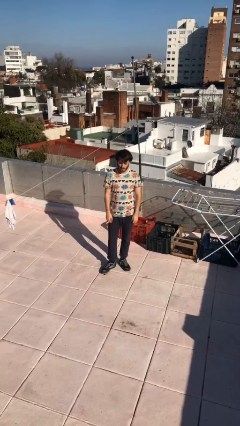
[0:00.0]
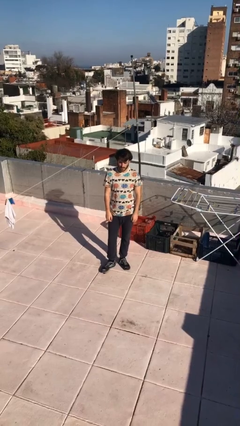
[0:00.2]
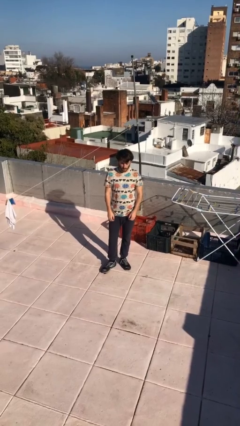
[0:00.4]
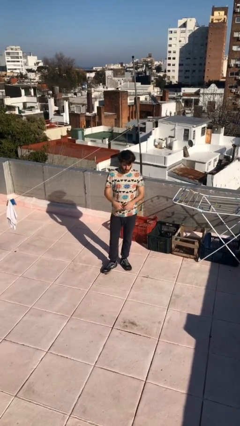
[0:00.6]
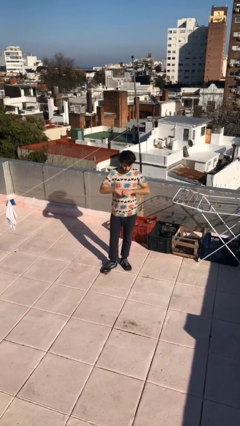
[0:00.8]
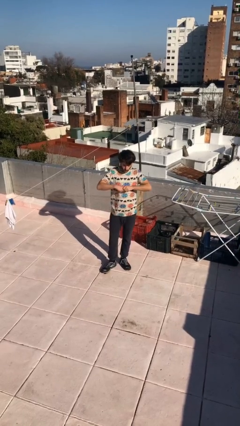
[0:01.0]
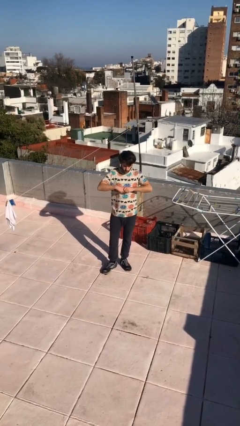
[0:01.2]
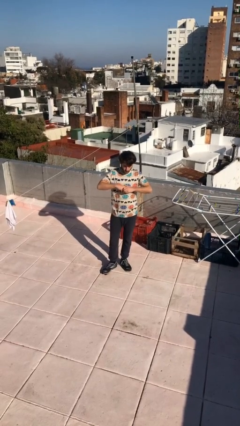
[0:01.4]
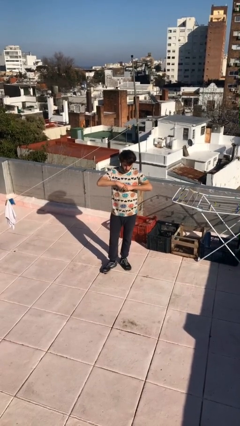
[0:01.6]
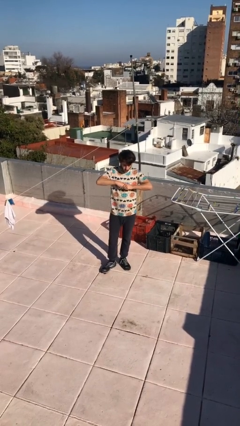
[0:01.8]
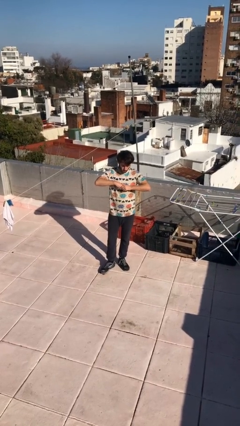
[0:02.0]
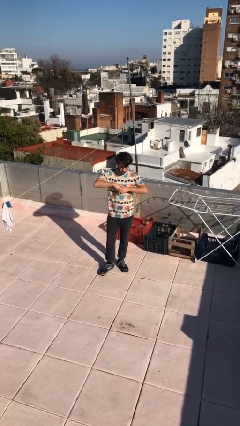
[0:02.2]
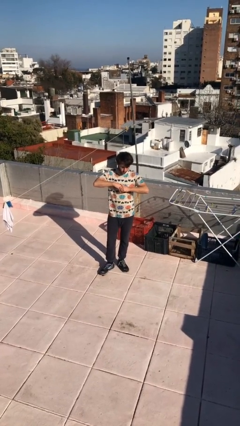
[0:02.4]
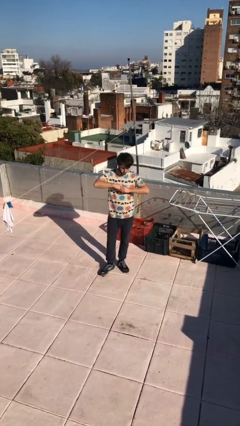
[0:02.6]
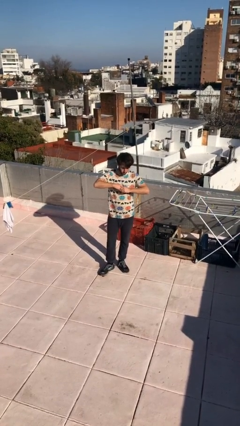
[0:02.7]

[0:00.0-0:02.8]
person cracks knuckles

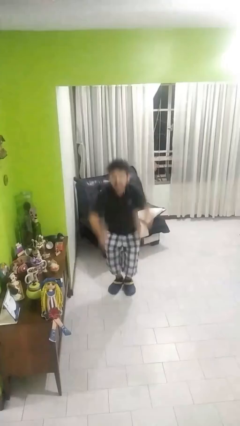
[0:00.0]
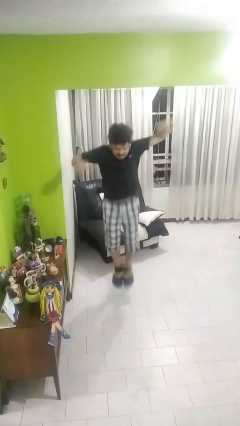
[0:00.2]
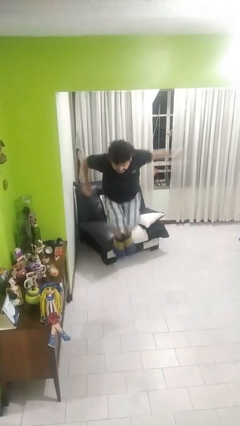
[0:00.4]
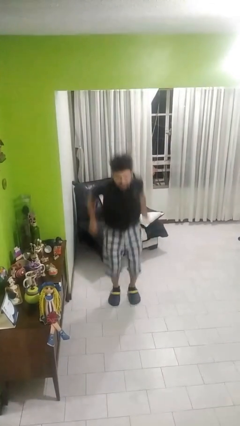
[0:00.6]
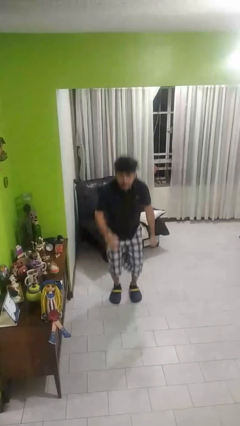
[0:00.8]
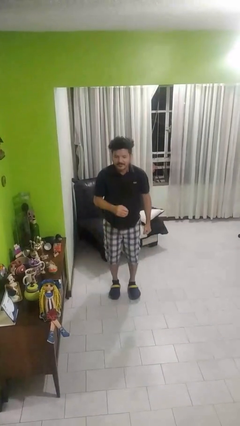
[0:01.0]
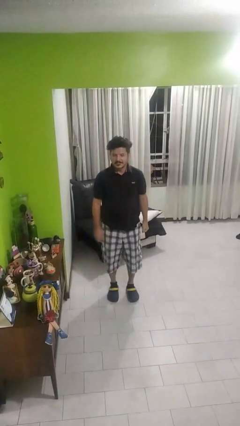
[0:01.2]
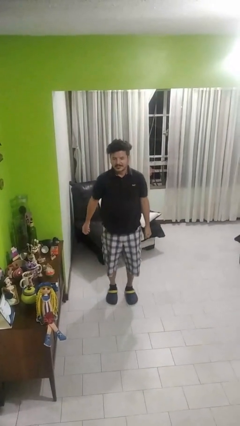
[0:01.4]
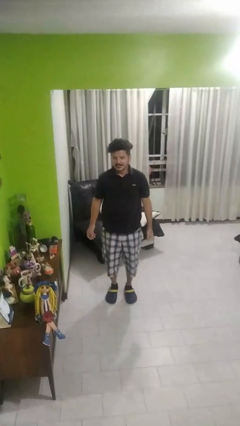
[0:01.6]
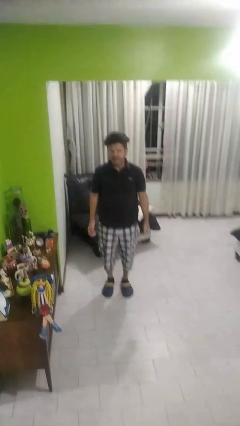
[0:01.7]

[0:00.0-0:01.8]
person jumps

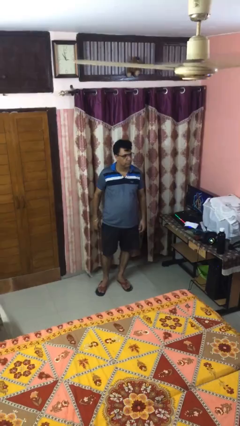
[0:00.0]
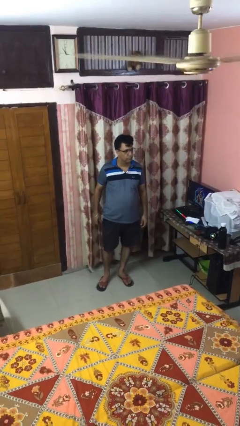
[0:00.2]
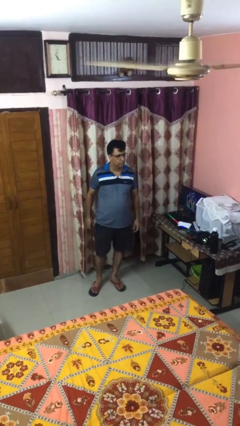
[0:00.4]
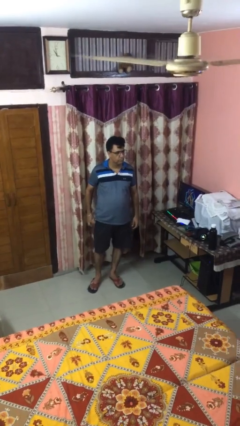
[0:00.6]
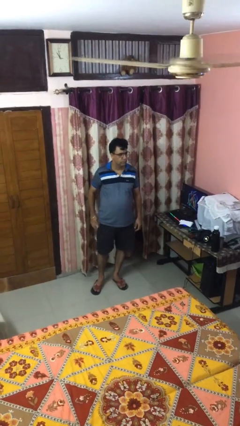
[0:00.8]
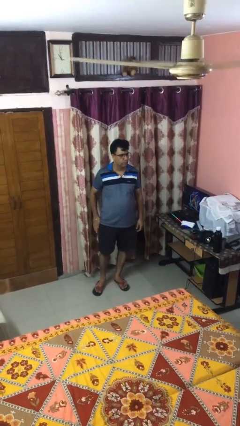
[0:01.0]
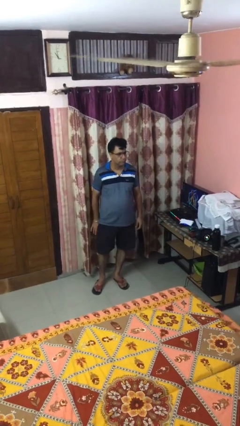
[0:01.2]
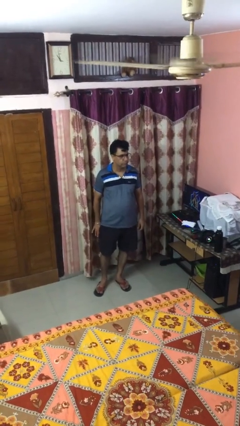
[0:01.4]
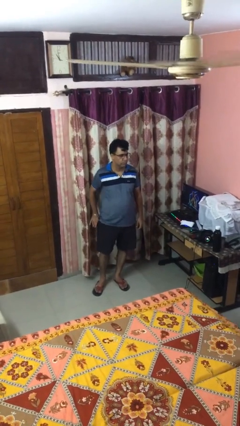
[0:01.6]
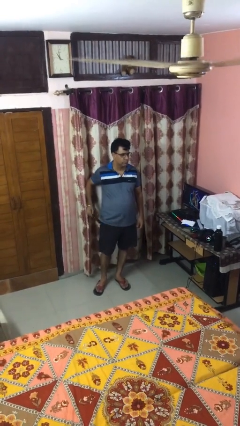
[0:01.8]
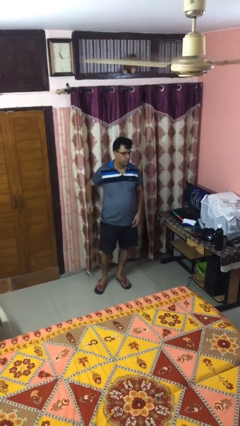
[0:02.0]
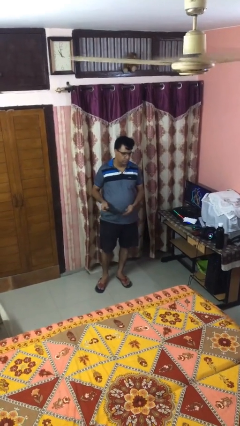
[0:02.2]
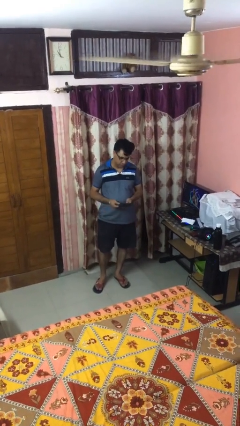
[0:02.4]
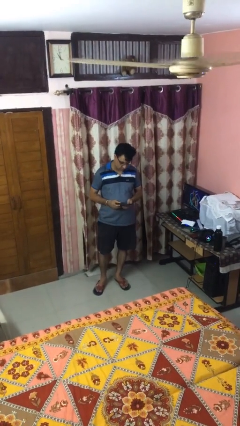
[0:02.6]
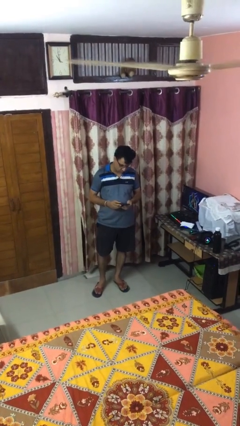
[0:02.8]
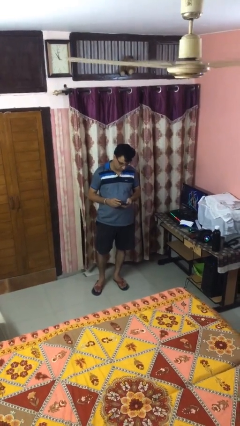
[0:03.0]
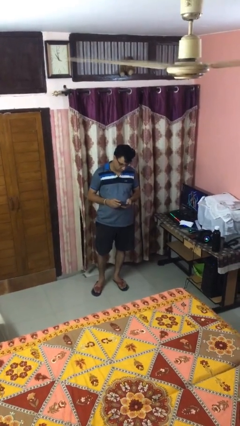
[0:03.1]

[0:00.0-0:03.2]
person takes phone from pocket

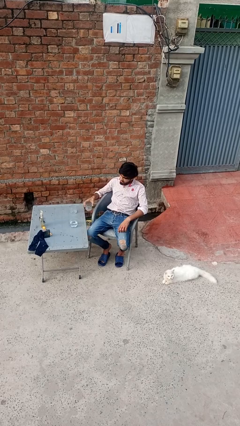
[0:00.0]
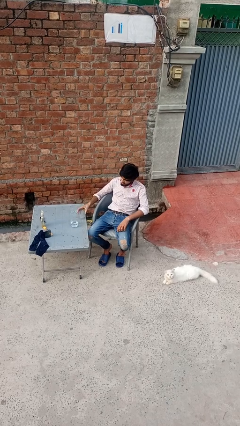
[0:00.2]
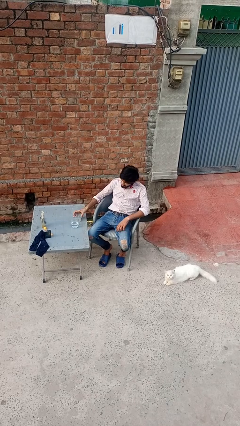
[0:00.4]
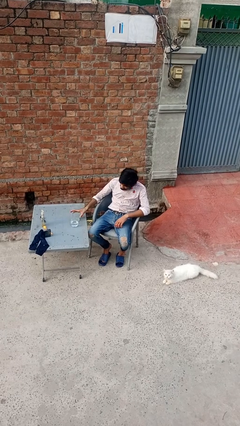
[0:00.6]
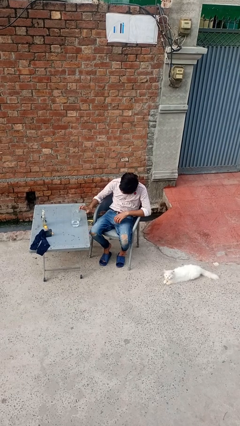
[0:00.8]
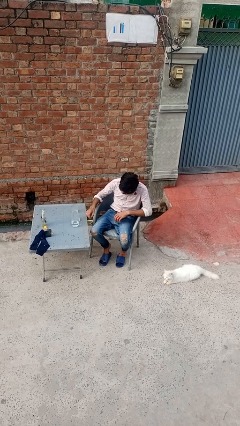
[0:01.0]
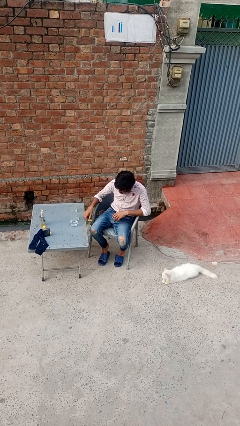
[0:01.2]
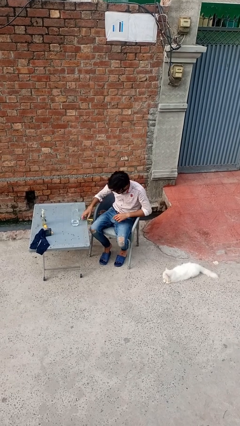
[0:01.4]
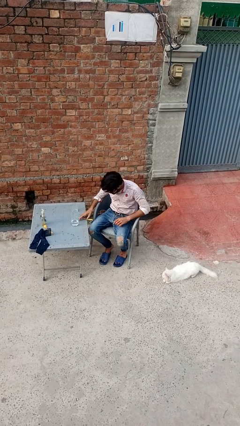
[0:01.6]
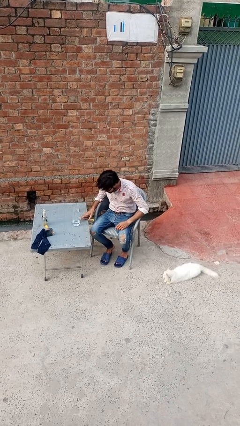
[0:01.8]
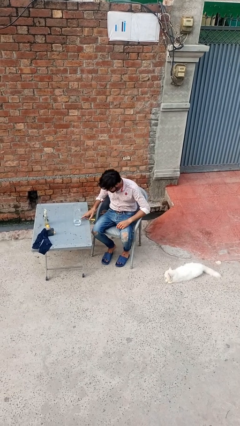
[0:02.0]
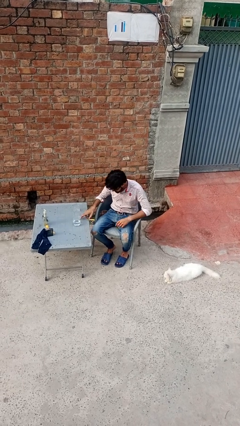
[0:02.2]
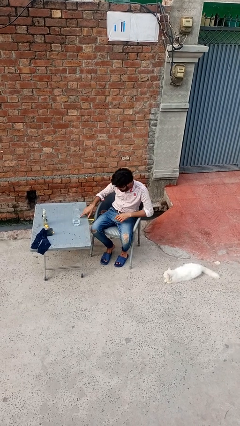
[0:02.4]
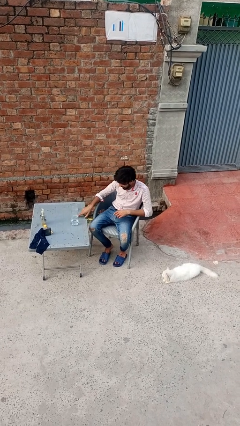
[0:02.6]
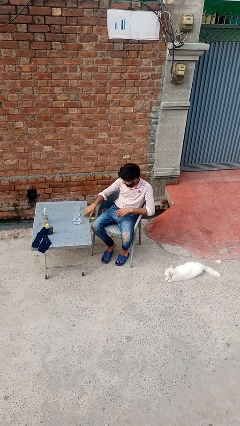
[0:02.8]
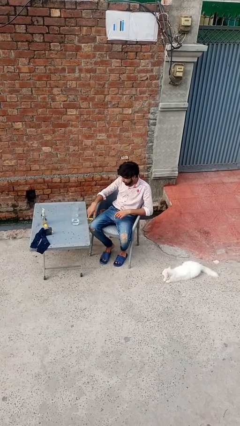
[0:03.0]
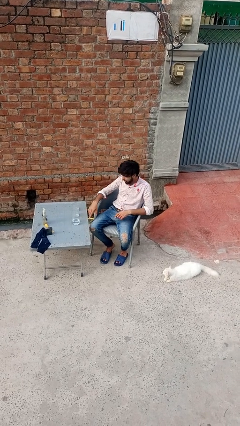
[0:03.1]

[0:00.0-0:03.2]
person puts down object on table

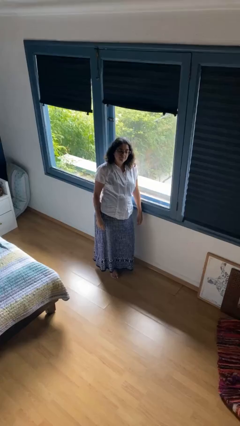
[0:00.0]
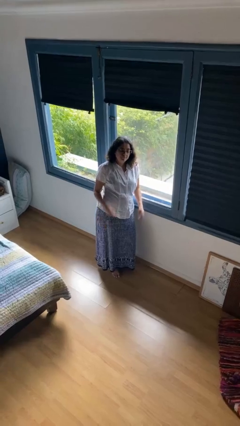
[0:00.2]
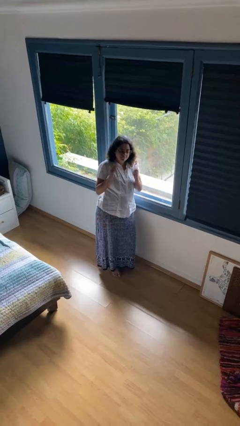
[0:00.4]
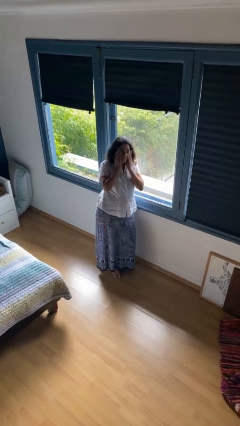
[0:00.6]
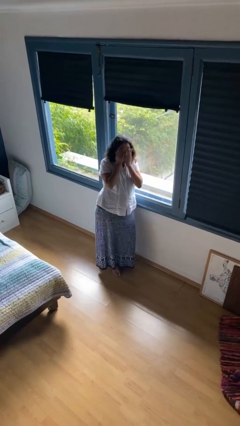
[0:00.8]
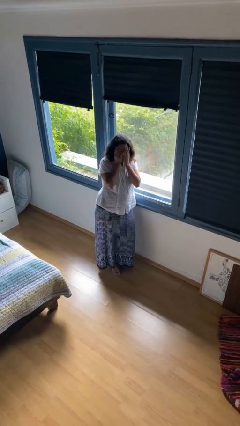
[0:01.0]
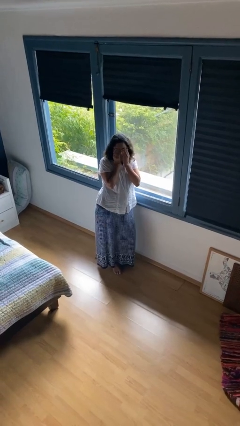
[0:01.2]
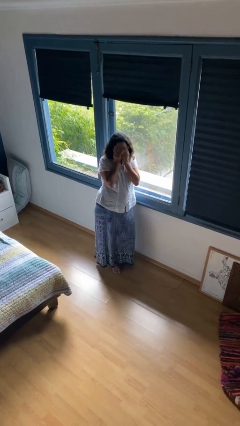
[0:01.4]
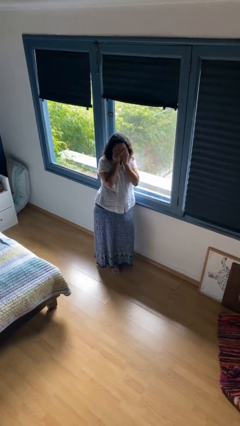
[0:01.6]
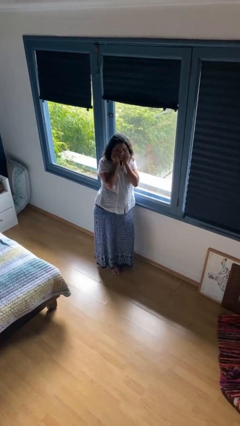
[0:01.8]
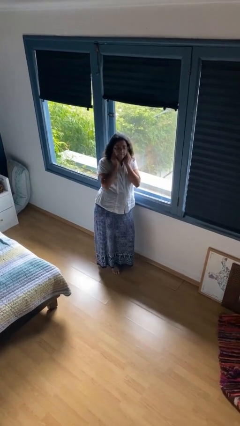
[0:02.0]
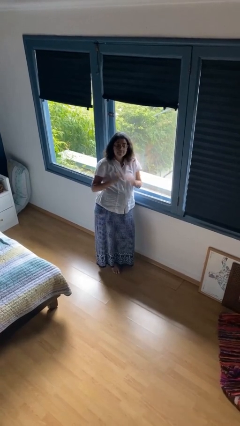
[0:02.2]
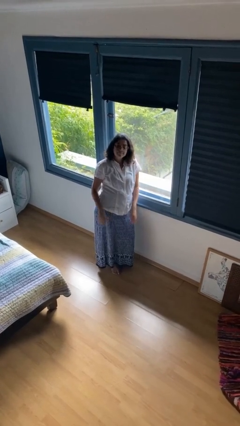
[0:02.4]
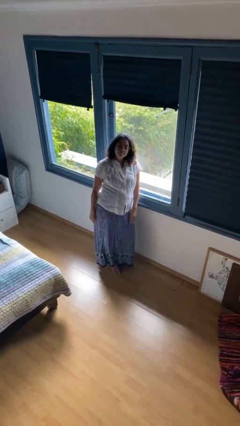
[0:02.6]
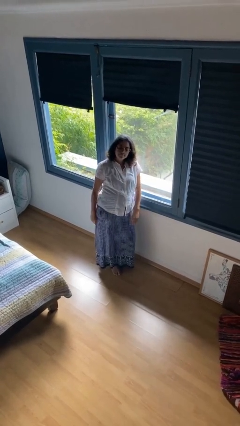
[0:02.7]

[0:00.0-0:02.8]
person rubs eyes

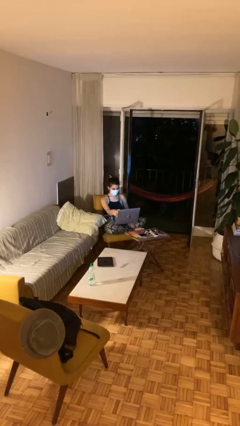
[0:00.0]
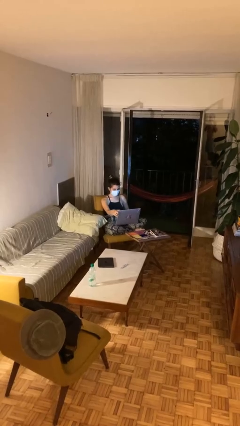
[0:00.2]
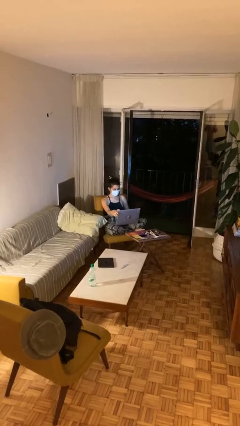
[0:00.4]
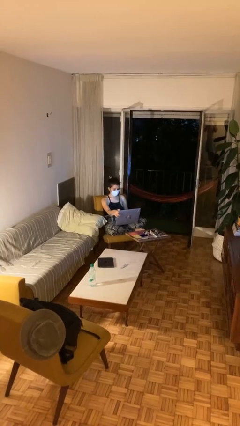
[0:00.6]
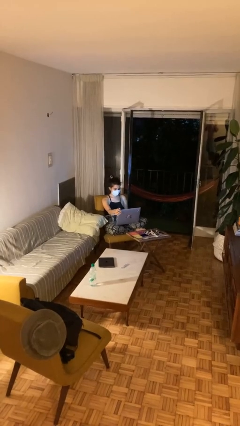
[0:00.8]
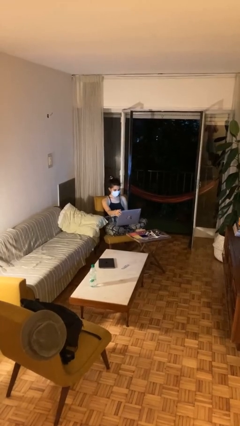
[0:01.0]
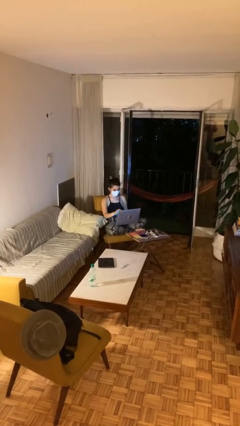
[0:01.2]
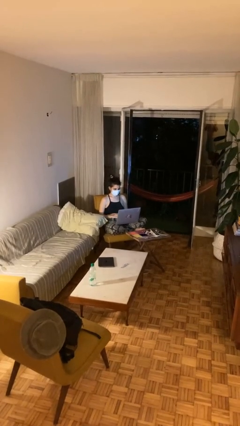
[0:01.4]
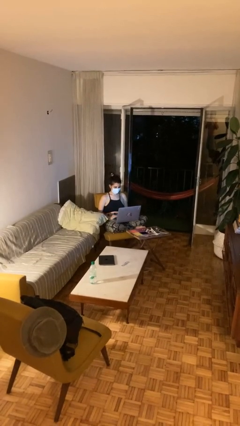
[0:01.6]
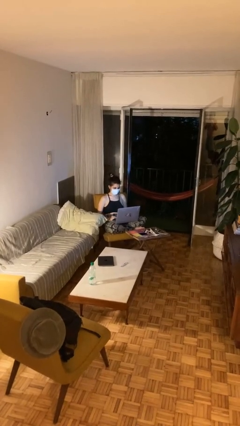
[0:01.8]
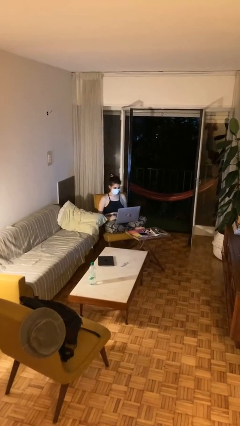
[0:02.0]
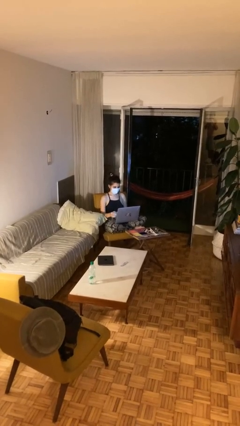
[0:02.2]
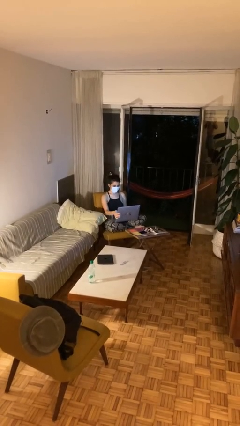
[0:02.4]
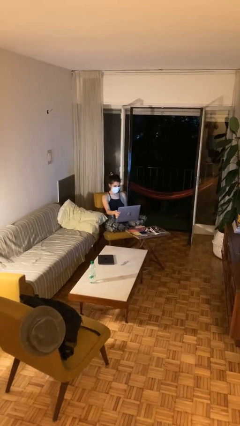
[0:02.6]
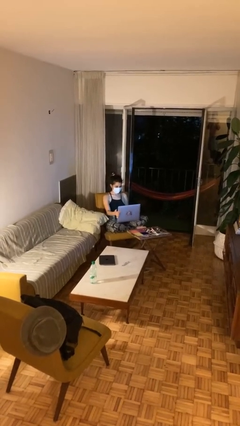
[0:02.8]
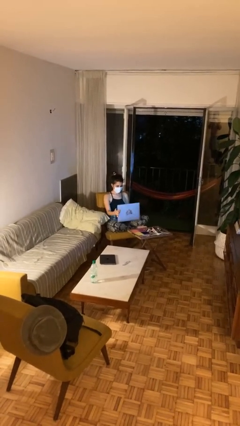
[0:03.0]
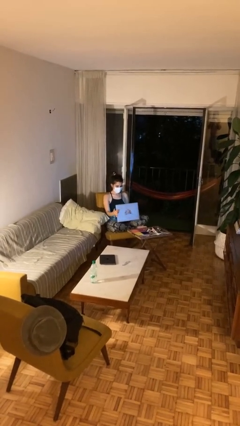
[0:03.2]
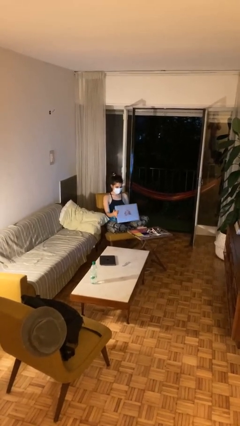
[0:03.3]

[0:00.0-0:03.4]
person interacts with laptop

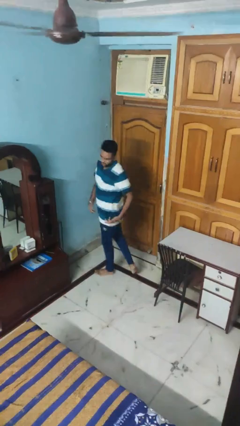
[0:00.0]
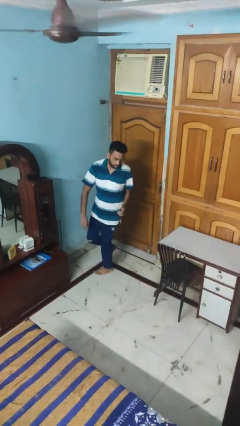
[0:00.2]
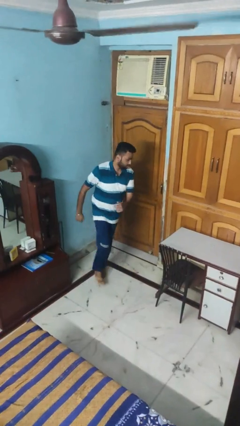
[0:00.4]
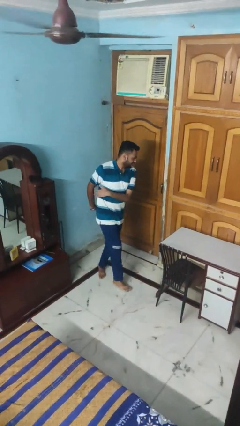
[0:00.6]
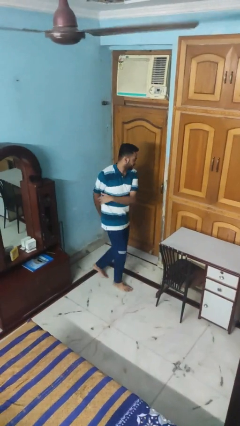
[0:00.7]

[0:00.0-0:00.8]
person twirls
